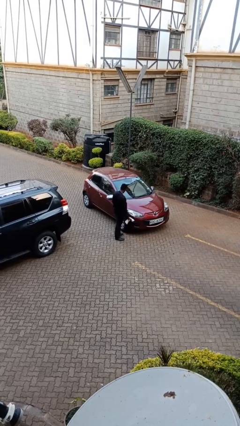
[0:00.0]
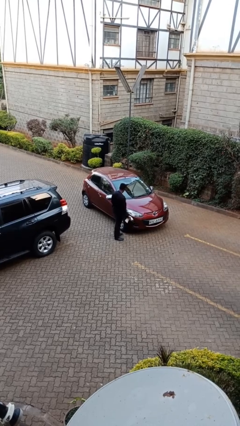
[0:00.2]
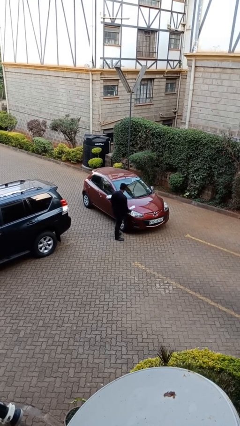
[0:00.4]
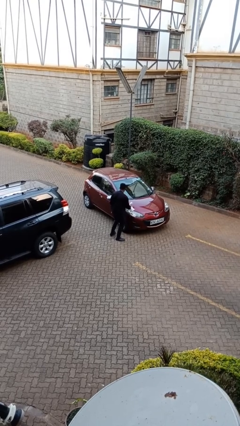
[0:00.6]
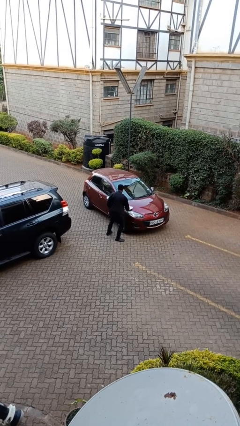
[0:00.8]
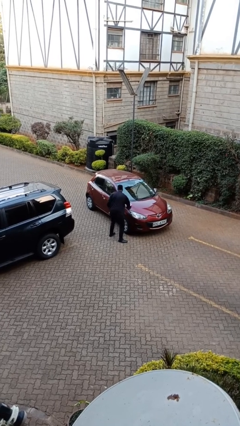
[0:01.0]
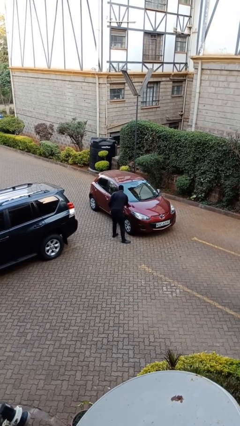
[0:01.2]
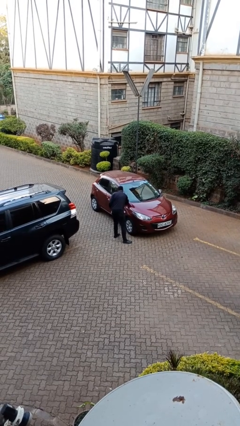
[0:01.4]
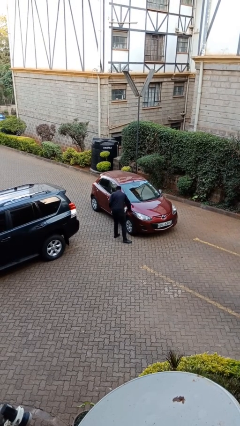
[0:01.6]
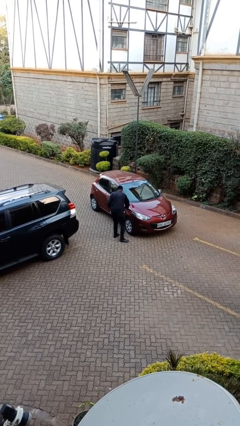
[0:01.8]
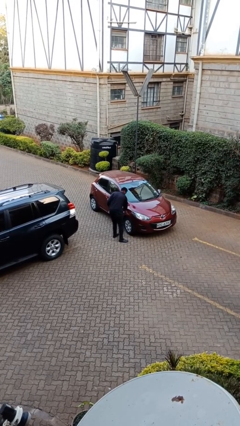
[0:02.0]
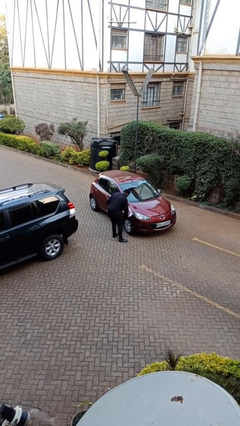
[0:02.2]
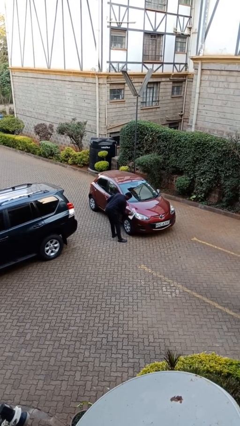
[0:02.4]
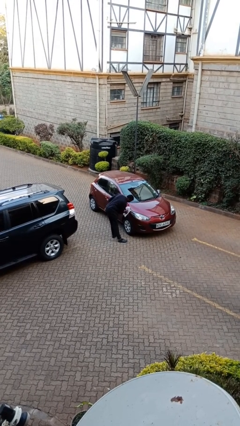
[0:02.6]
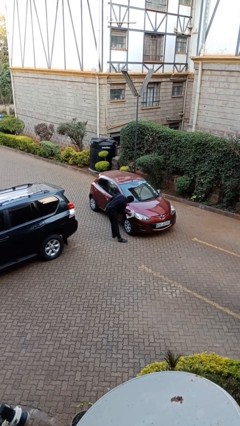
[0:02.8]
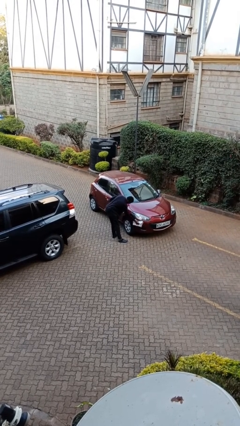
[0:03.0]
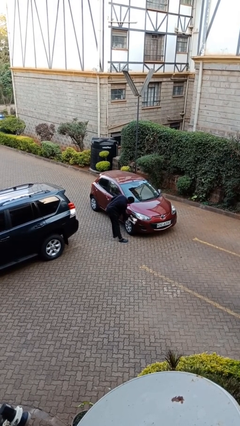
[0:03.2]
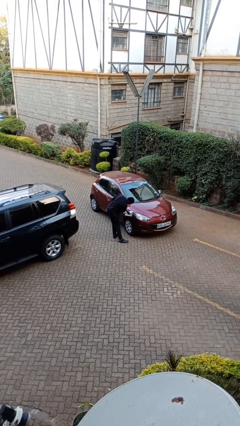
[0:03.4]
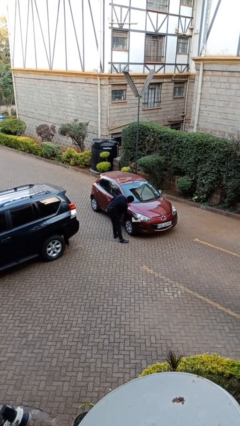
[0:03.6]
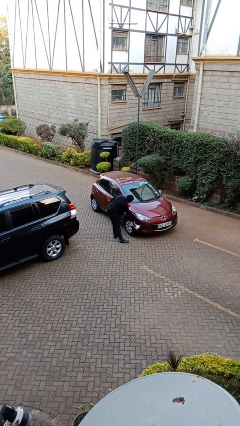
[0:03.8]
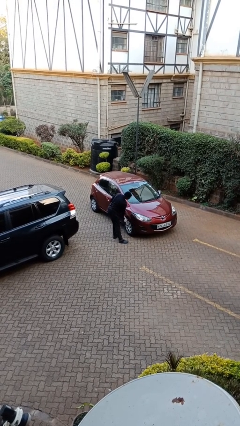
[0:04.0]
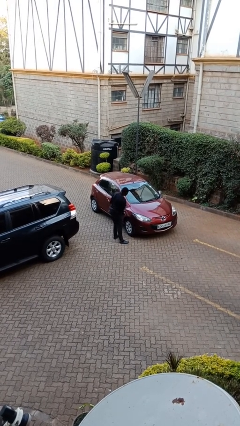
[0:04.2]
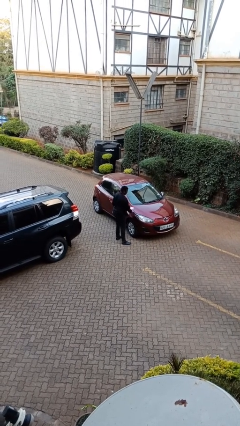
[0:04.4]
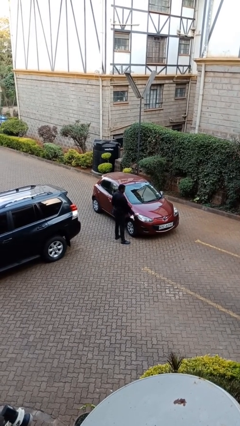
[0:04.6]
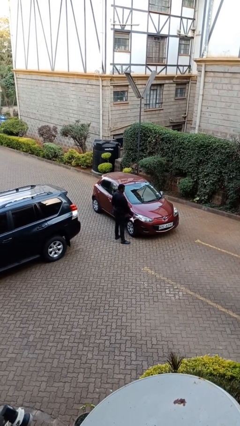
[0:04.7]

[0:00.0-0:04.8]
person polishes car with rag

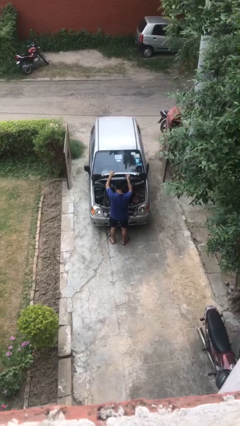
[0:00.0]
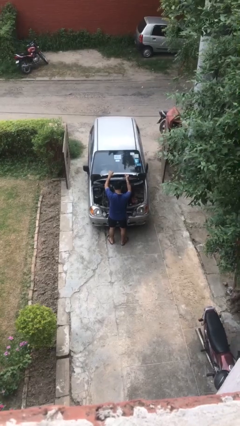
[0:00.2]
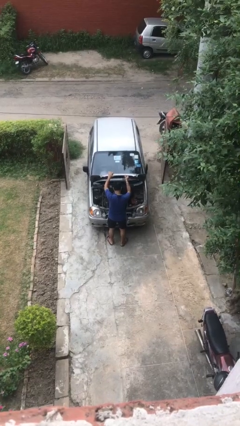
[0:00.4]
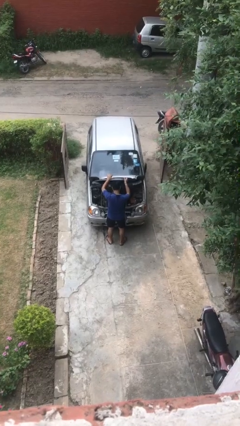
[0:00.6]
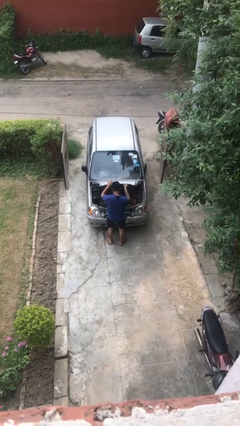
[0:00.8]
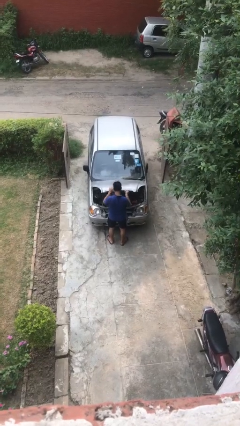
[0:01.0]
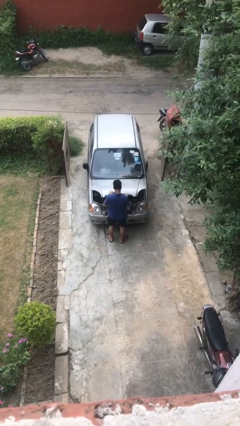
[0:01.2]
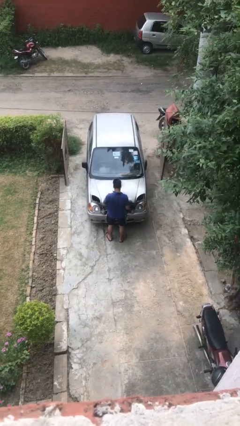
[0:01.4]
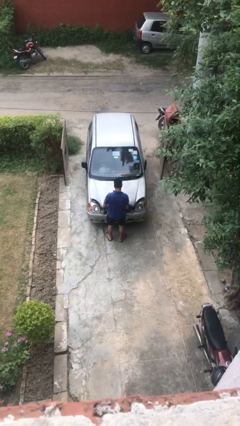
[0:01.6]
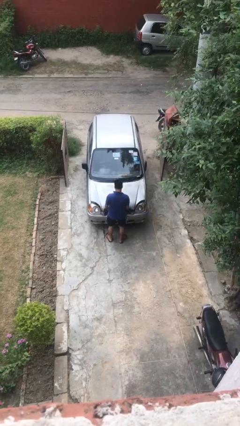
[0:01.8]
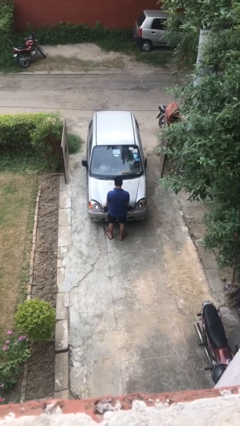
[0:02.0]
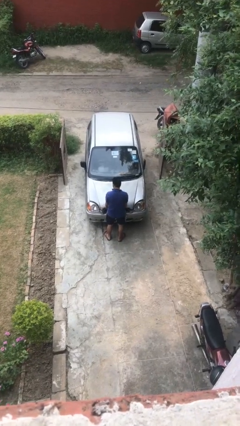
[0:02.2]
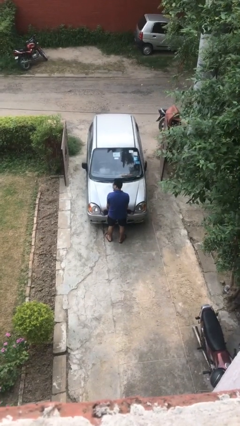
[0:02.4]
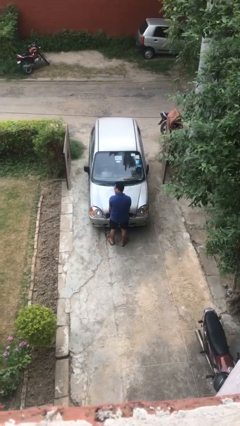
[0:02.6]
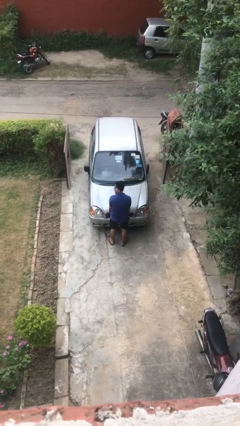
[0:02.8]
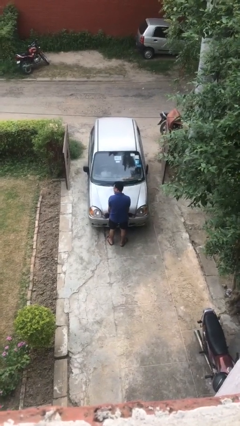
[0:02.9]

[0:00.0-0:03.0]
person closes car hood

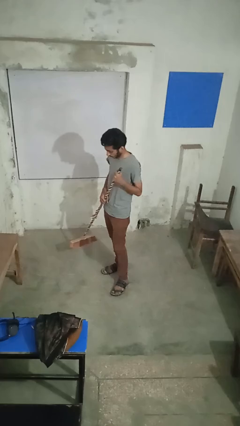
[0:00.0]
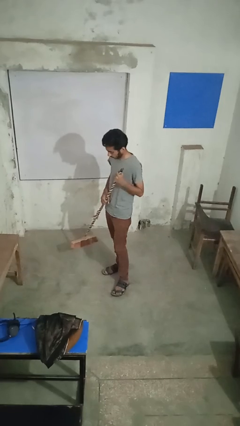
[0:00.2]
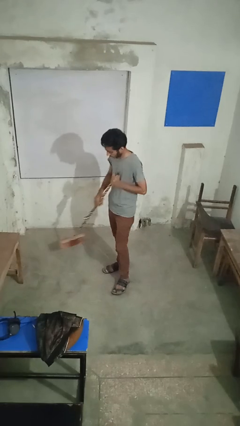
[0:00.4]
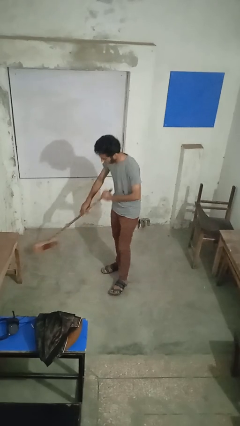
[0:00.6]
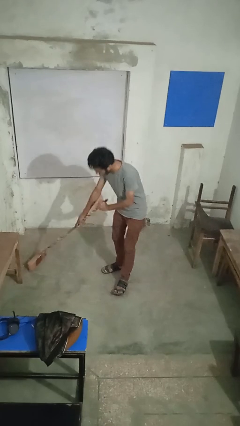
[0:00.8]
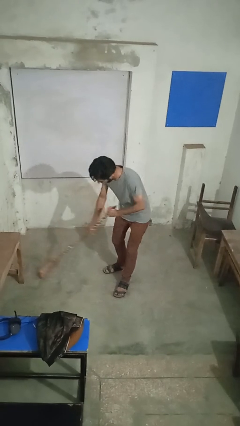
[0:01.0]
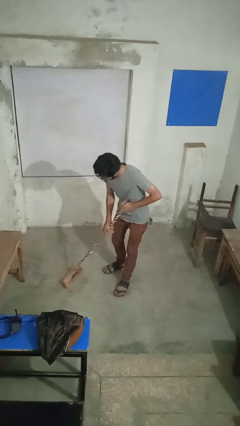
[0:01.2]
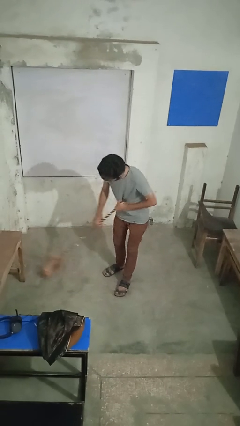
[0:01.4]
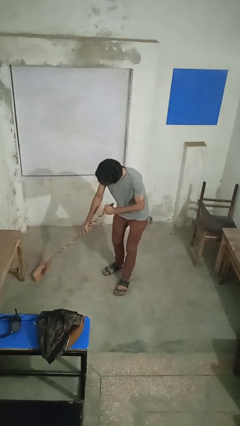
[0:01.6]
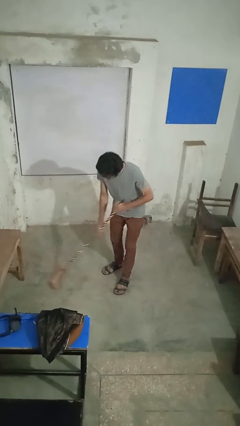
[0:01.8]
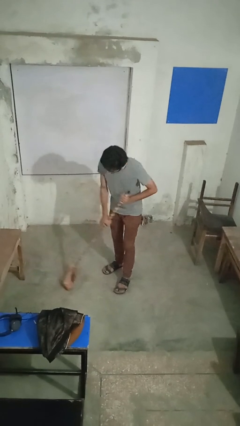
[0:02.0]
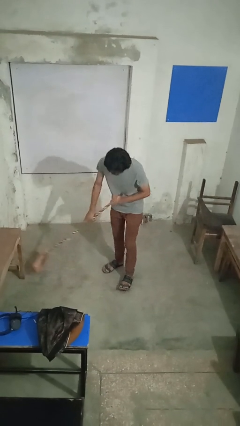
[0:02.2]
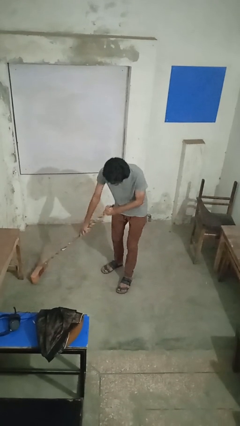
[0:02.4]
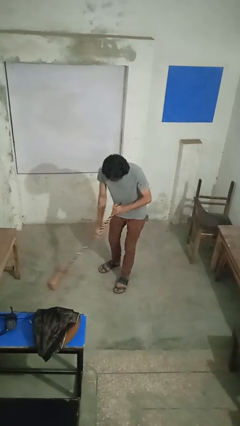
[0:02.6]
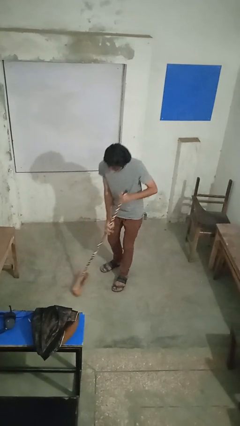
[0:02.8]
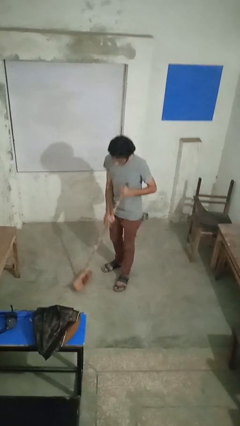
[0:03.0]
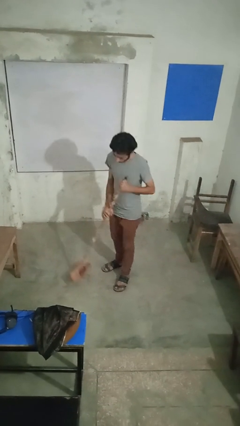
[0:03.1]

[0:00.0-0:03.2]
person sweeps floor

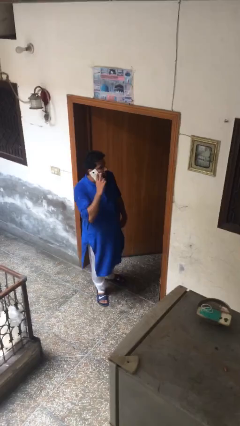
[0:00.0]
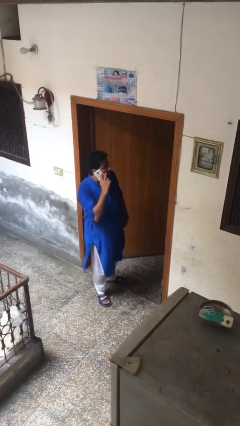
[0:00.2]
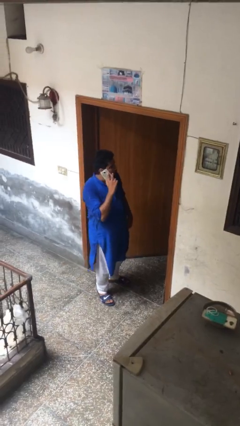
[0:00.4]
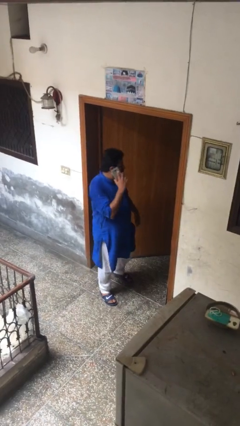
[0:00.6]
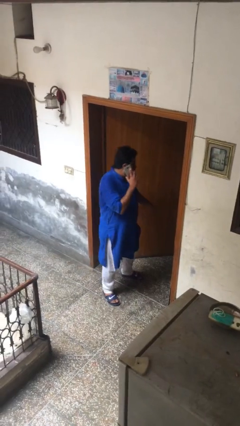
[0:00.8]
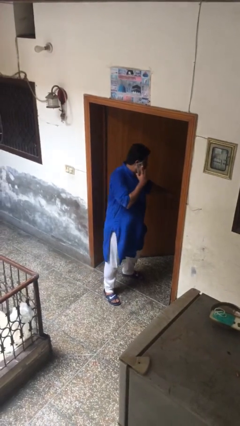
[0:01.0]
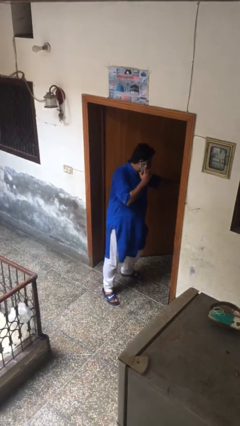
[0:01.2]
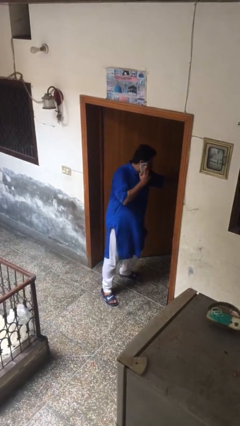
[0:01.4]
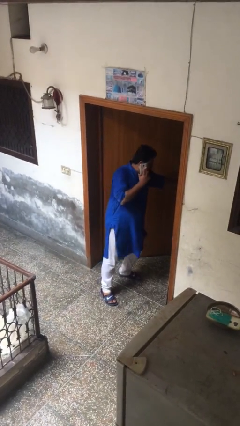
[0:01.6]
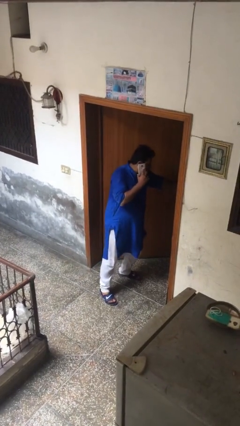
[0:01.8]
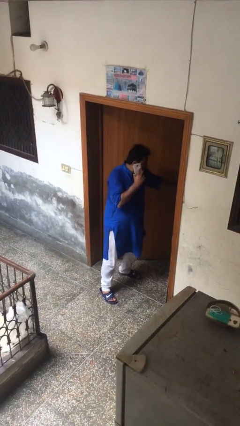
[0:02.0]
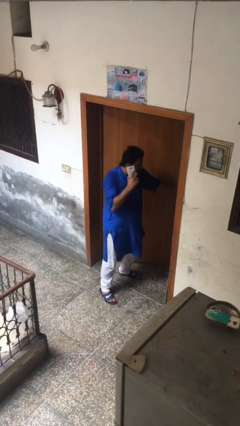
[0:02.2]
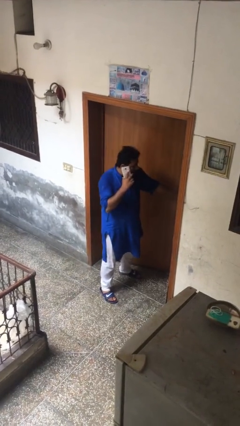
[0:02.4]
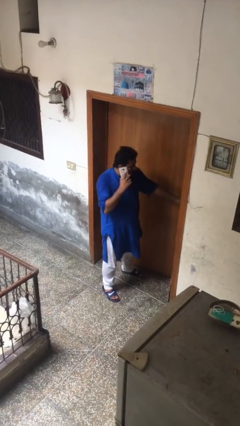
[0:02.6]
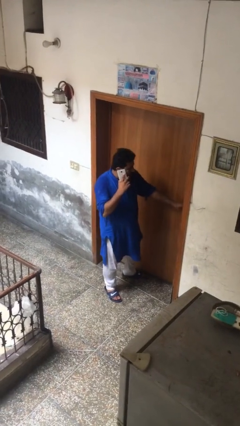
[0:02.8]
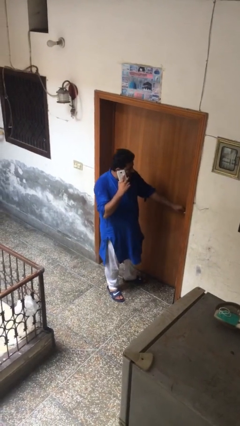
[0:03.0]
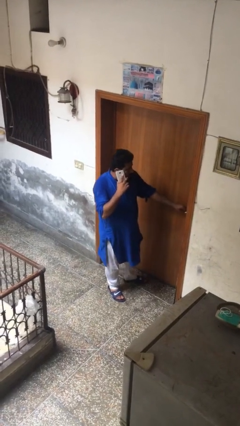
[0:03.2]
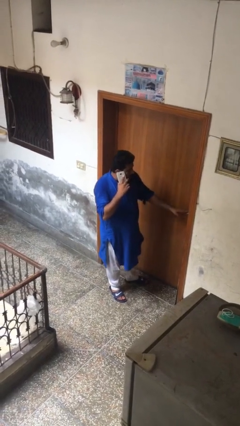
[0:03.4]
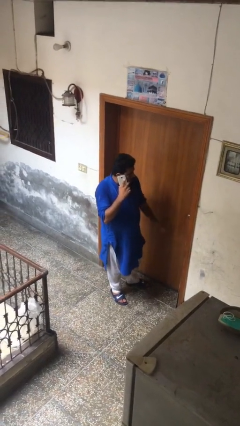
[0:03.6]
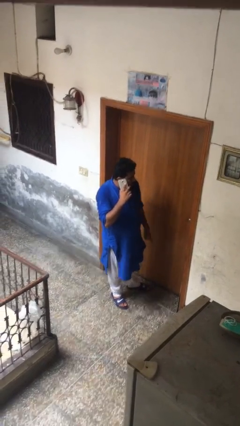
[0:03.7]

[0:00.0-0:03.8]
person closes facility door

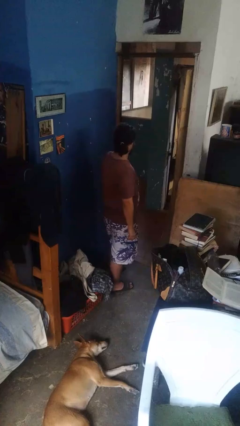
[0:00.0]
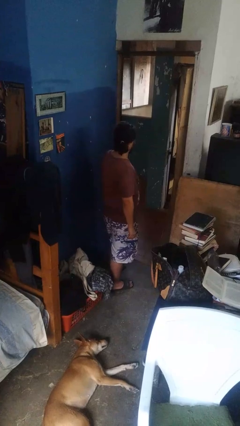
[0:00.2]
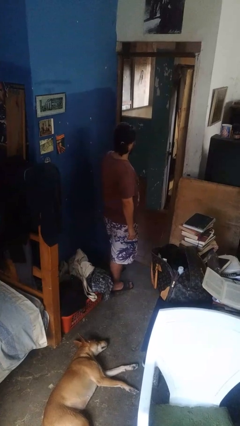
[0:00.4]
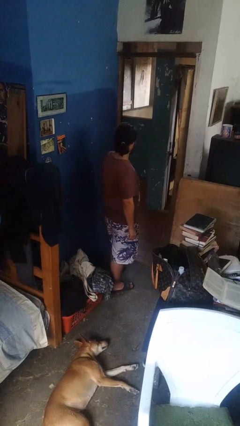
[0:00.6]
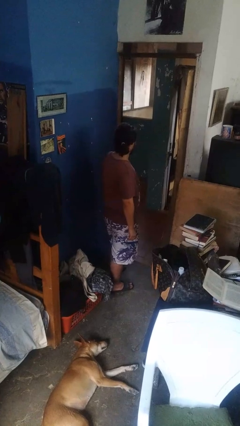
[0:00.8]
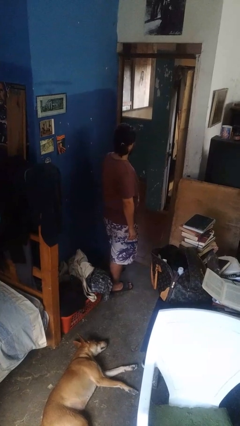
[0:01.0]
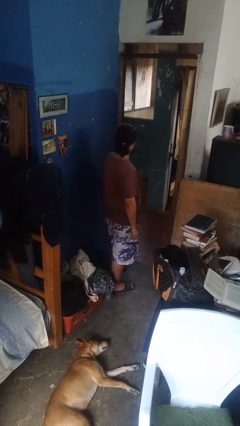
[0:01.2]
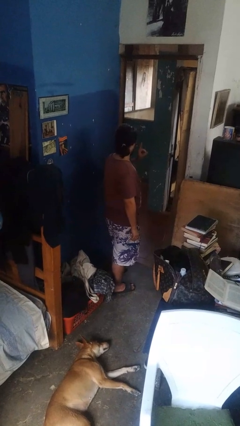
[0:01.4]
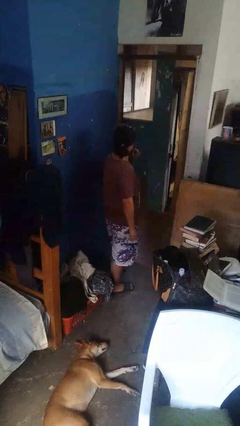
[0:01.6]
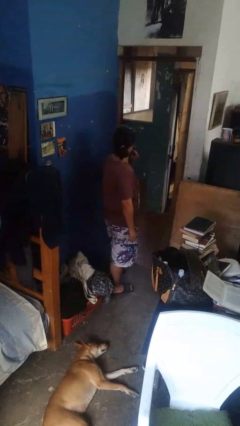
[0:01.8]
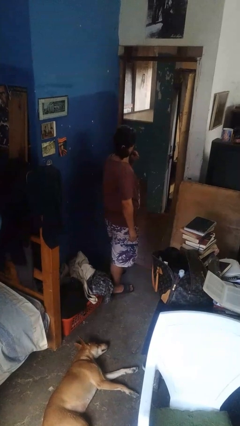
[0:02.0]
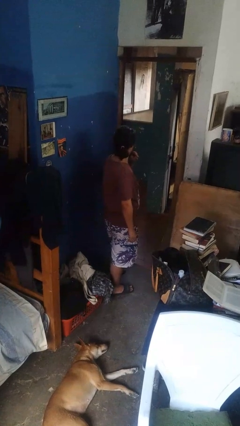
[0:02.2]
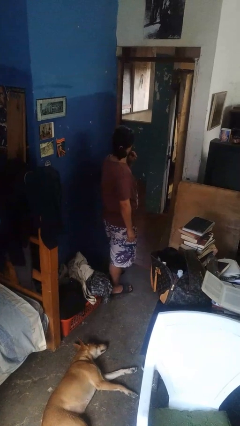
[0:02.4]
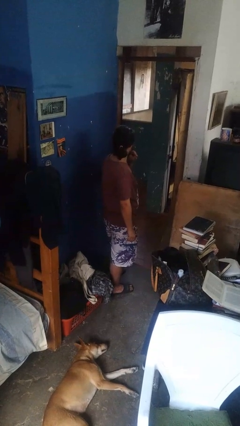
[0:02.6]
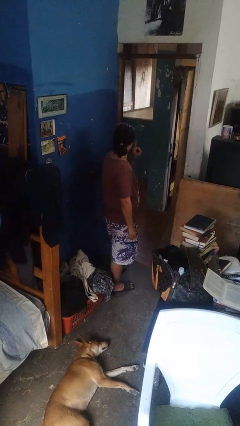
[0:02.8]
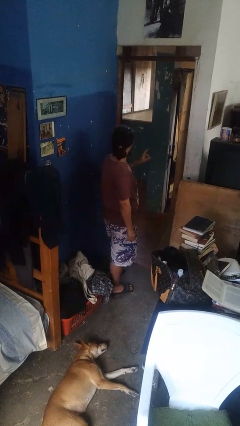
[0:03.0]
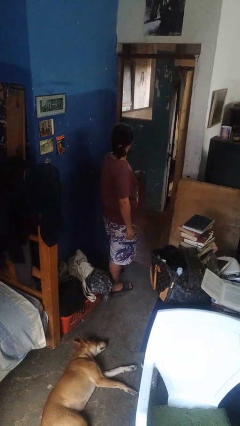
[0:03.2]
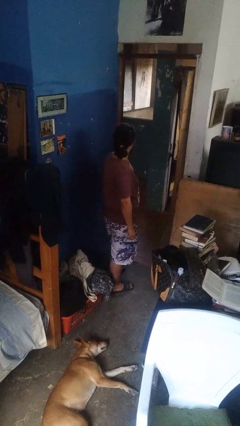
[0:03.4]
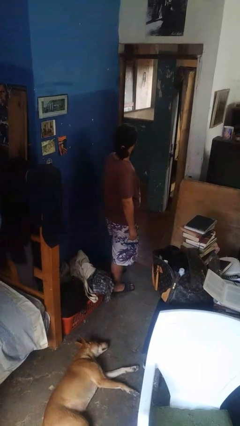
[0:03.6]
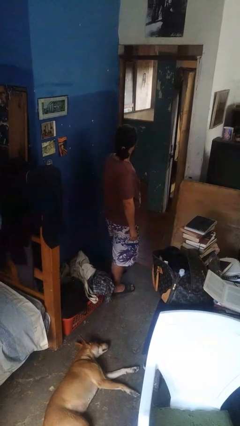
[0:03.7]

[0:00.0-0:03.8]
person gestures be quiet
